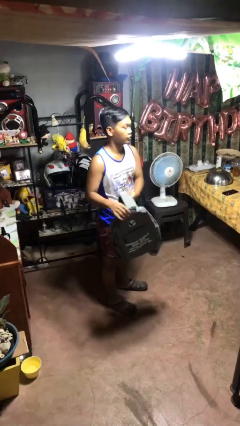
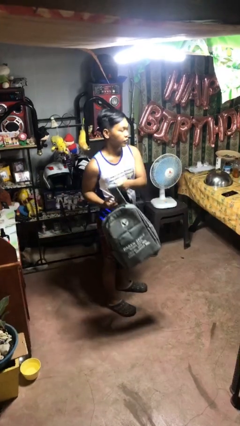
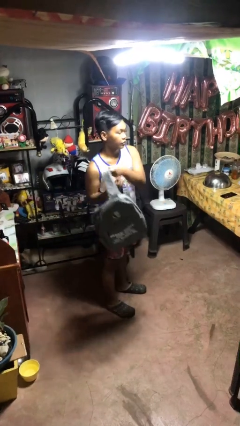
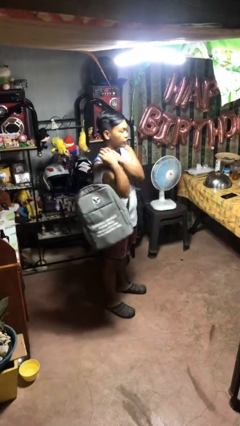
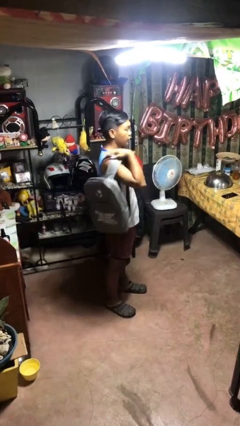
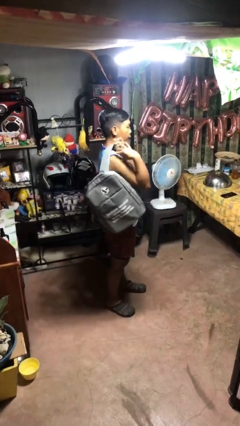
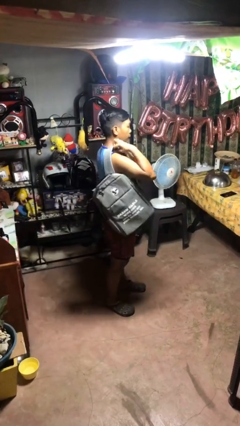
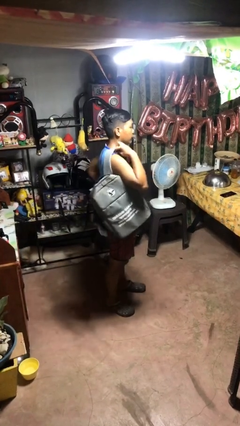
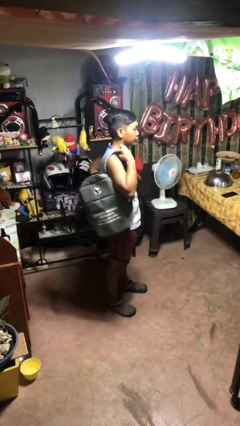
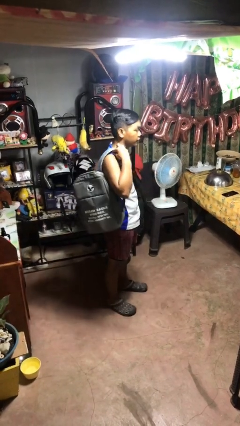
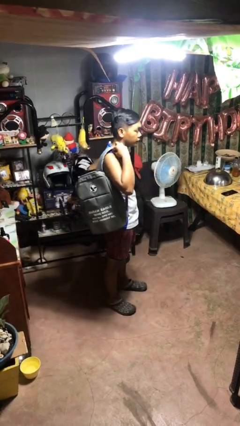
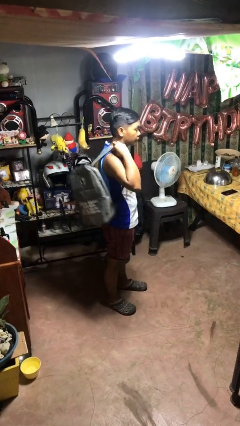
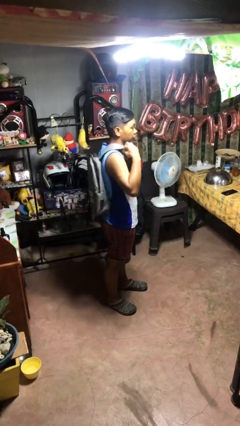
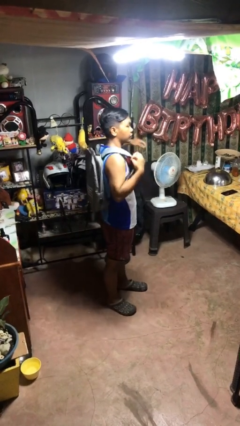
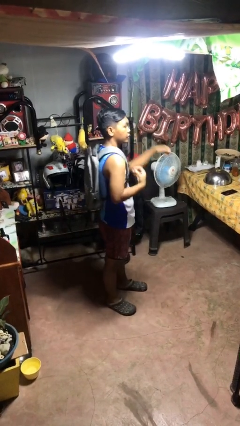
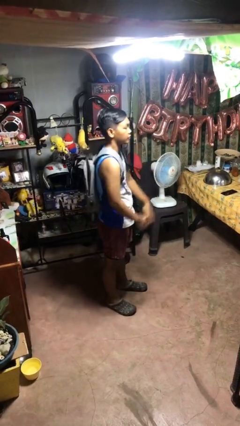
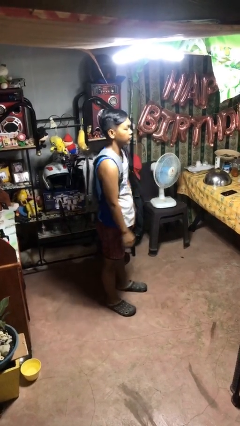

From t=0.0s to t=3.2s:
person puts on backpack

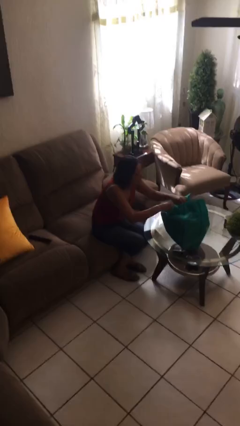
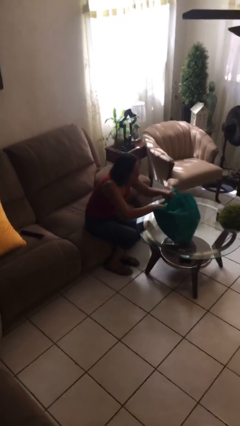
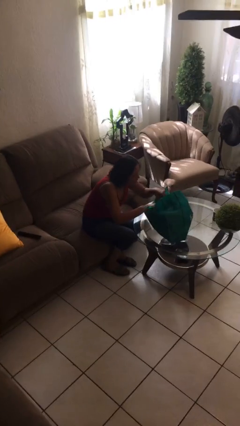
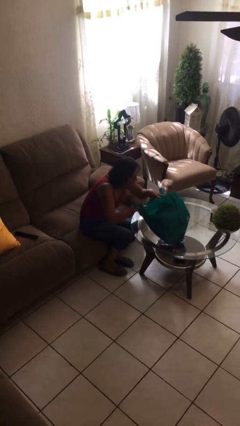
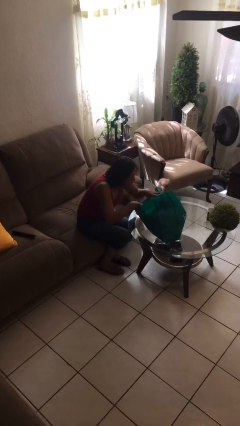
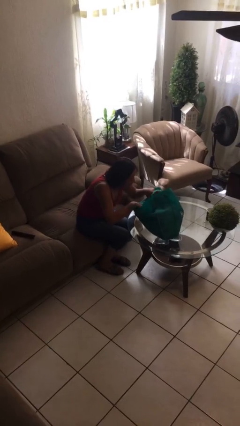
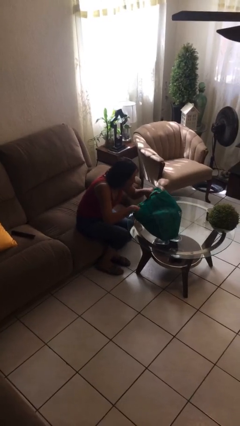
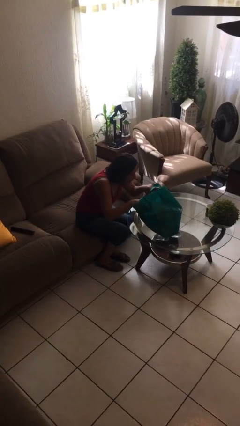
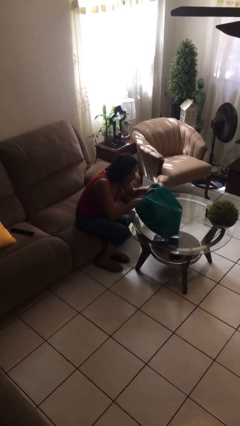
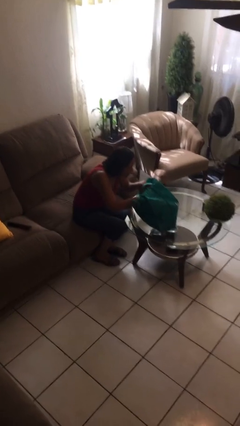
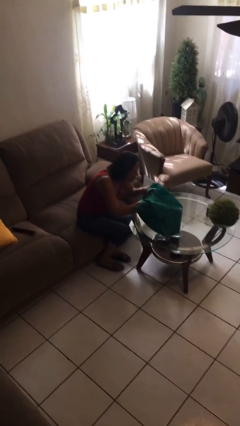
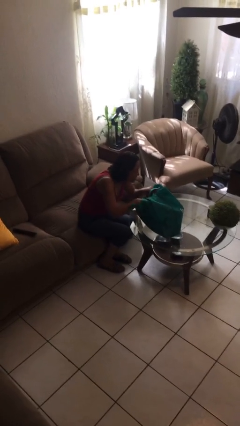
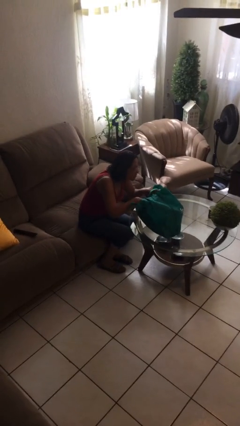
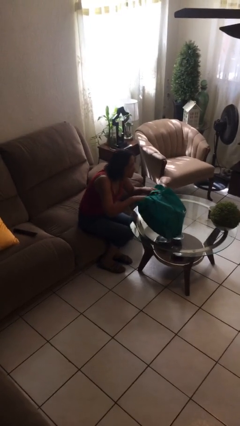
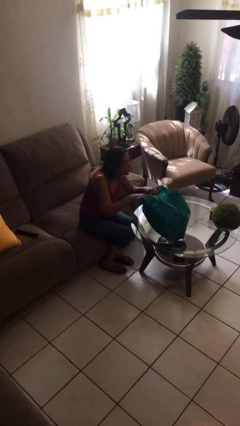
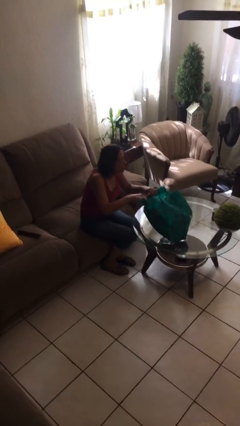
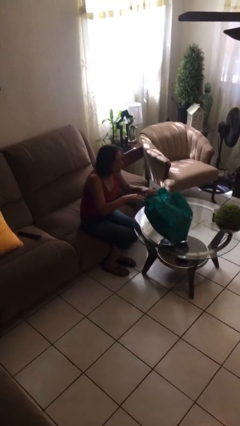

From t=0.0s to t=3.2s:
person searches in bag

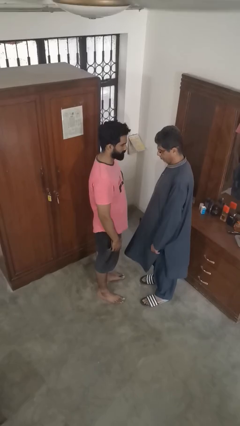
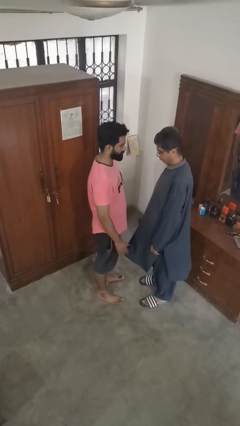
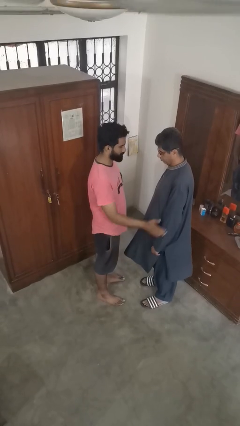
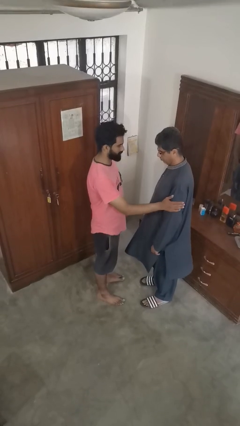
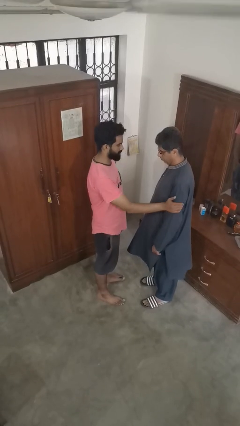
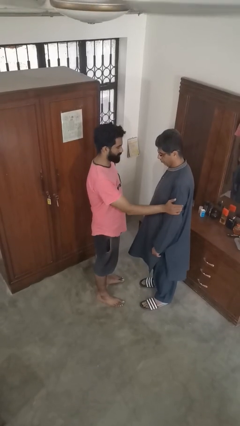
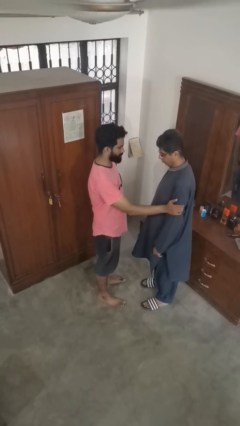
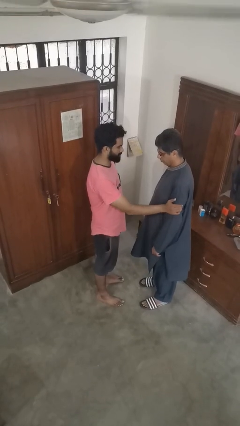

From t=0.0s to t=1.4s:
person grabs person by bicep

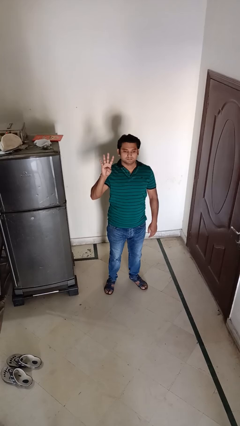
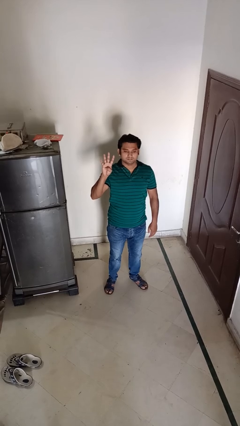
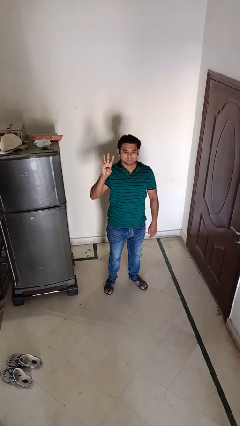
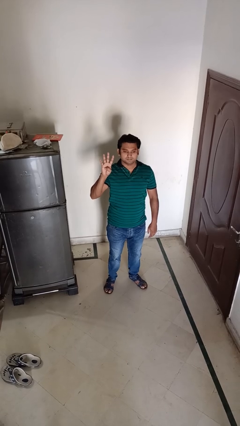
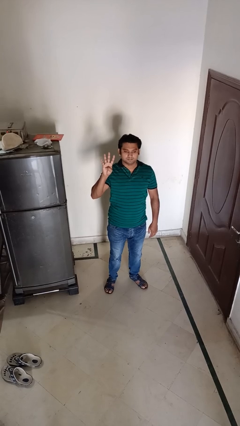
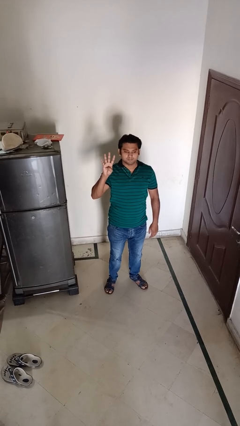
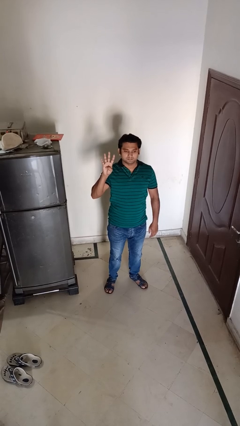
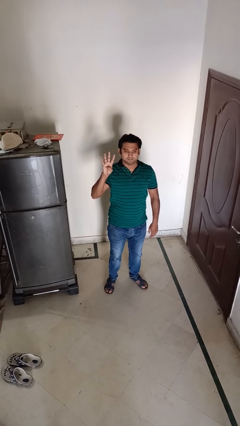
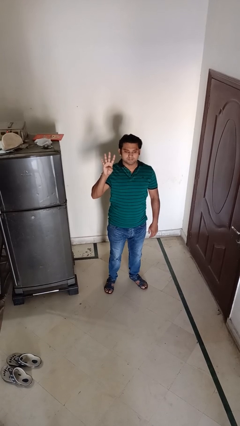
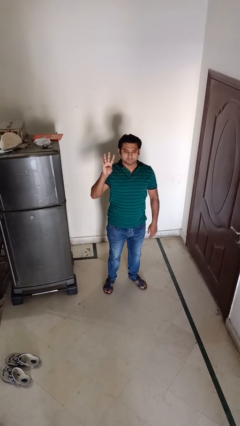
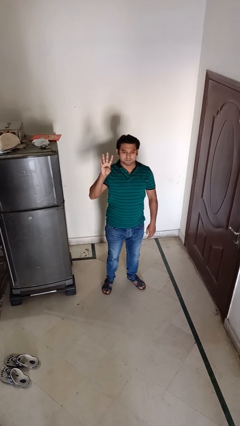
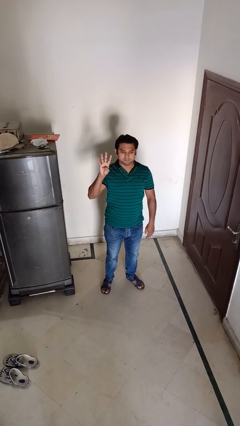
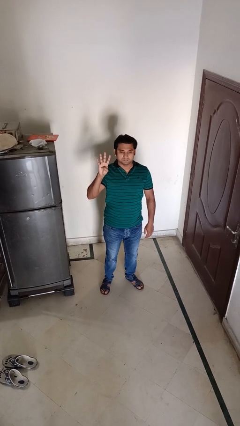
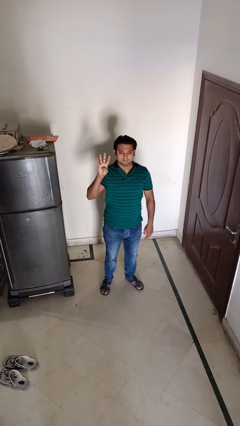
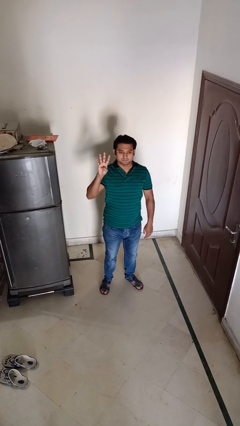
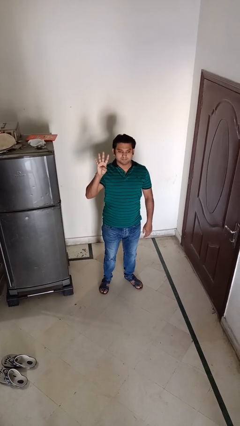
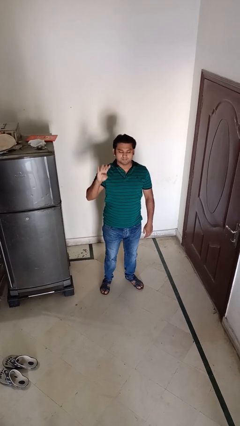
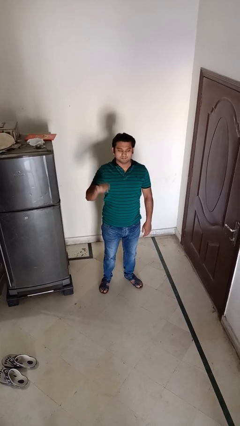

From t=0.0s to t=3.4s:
person gestures number four

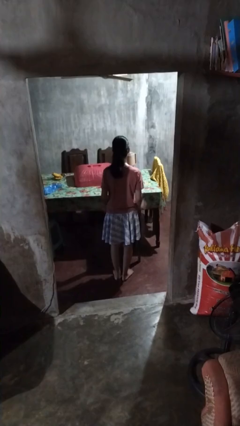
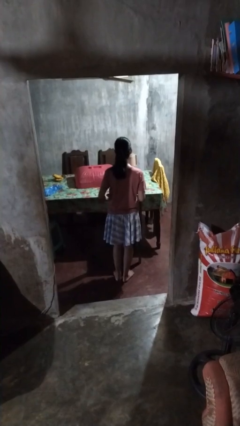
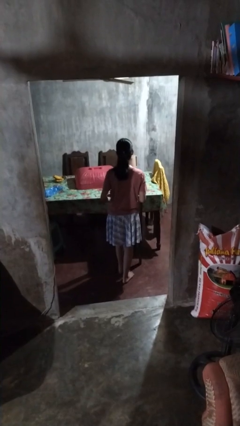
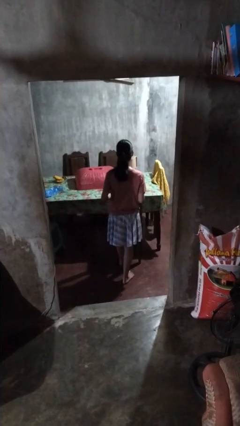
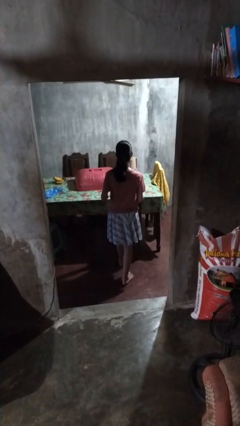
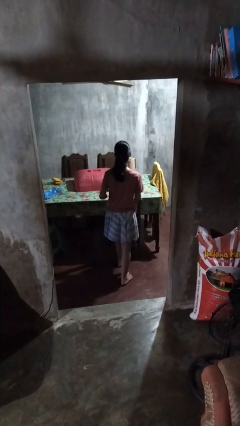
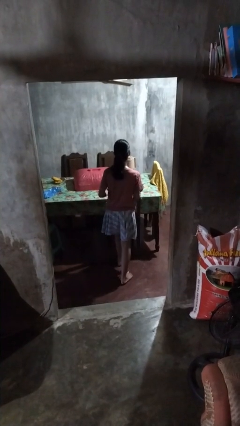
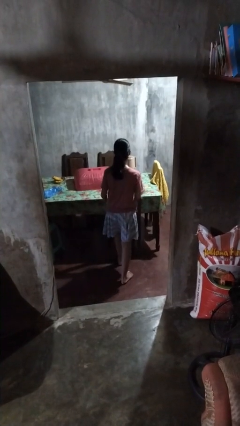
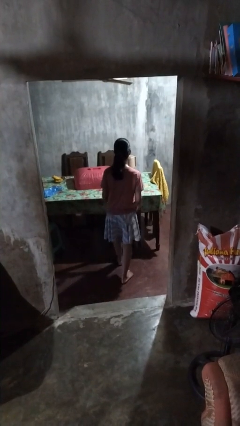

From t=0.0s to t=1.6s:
person pushes in chair

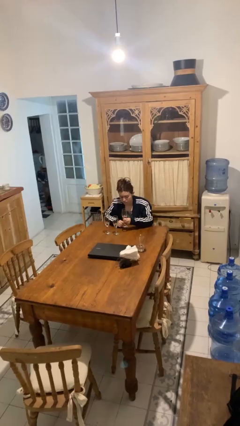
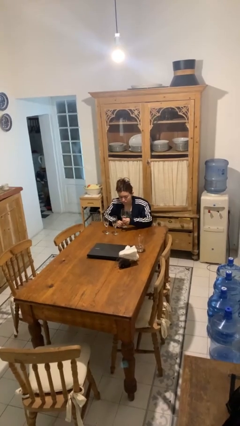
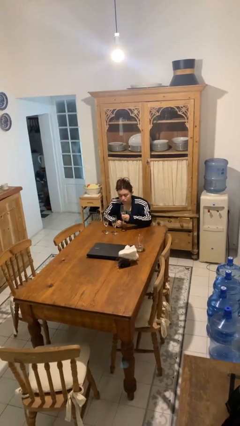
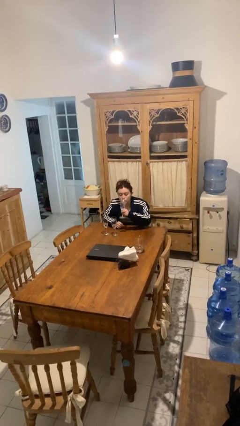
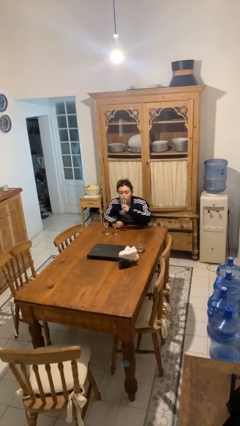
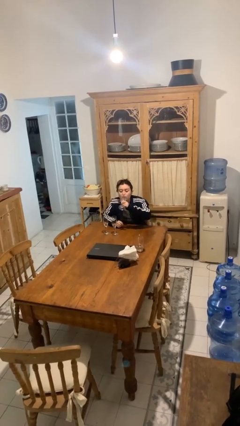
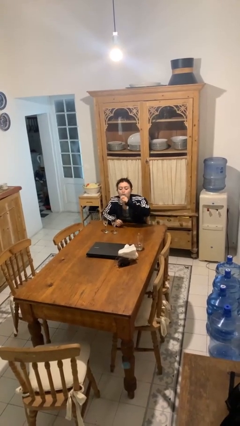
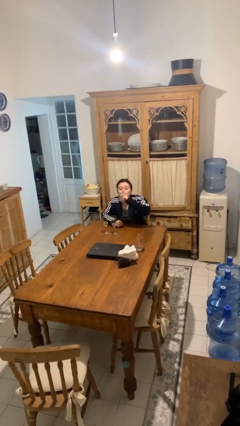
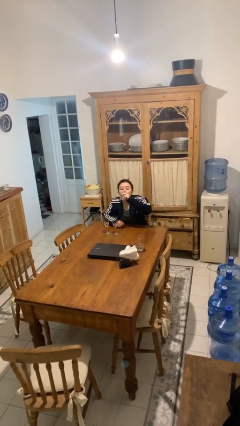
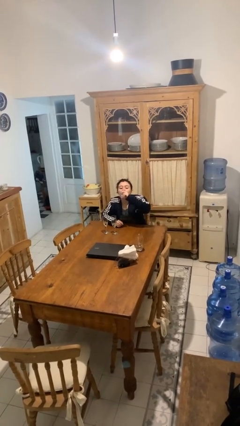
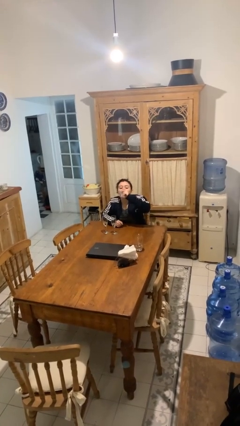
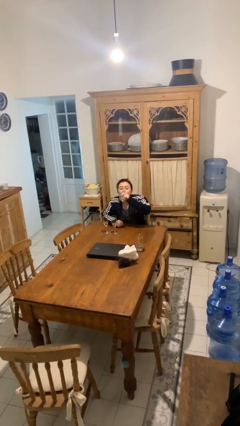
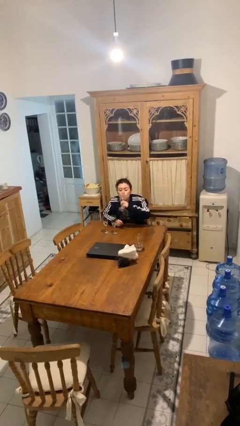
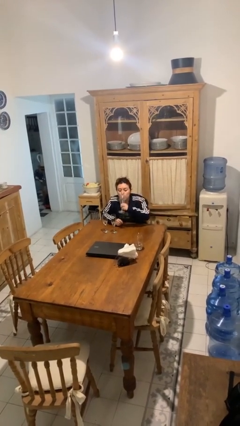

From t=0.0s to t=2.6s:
person drinks from shotglass

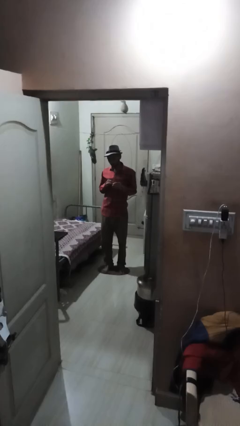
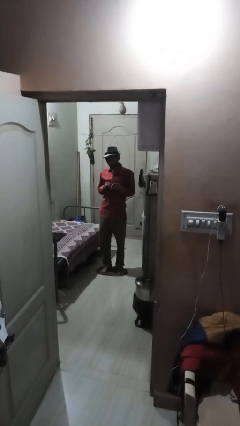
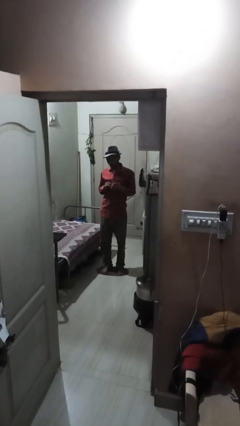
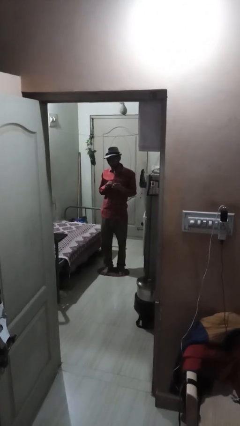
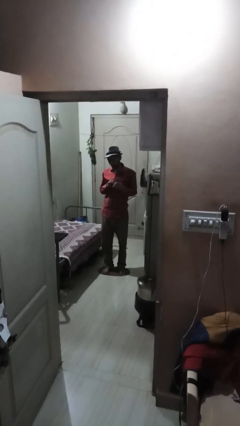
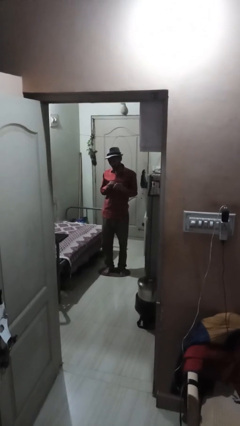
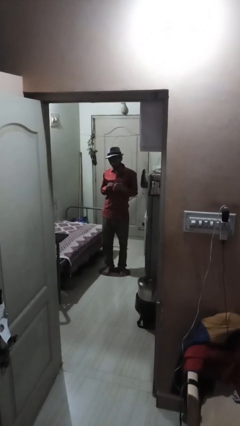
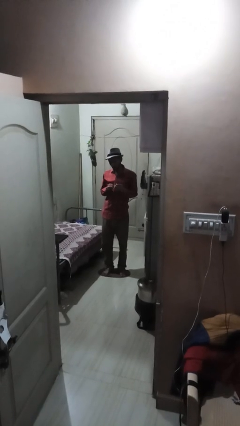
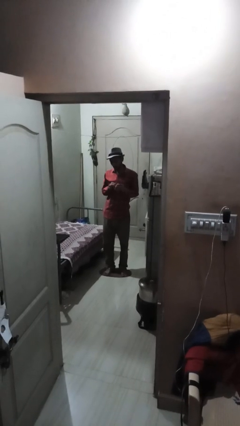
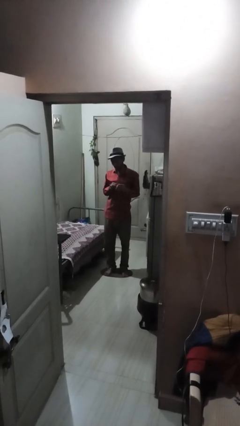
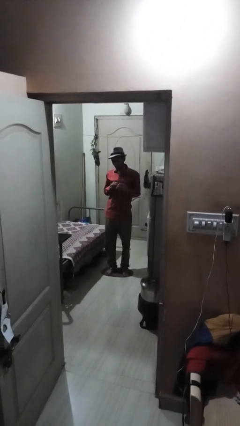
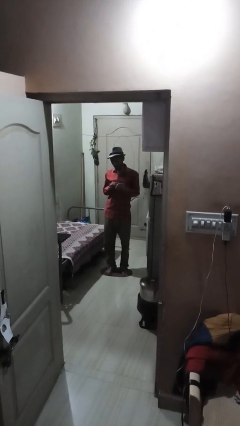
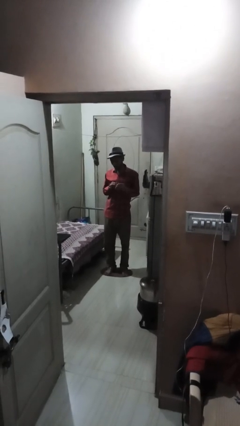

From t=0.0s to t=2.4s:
person files fingernails
